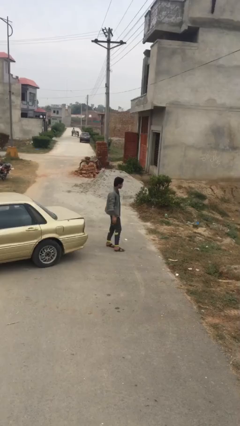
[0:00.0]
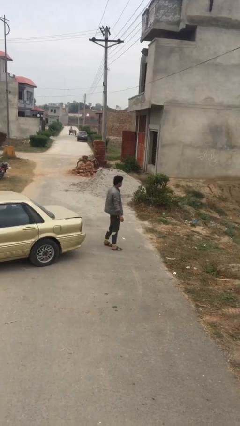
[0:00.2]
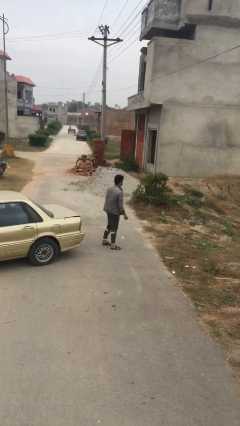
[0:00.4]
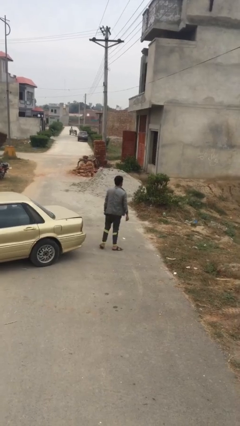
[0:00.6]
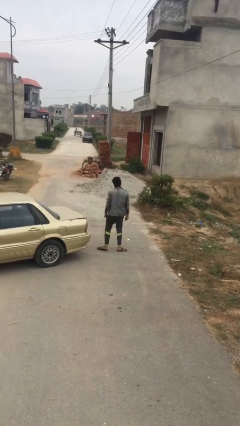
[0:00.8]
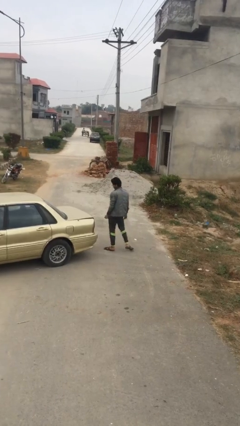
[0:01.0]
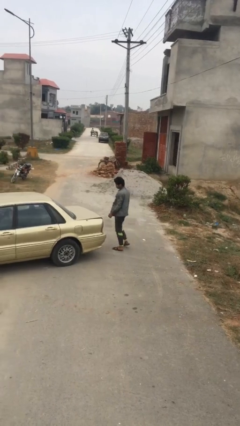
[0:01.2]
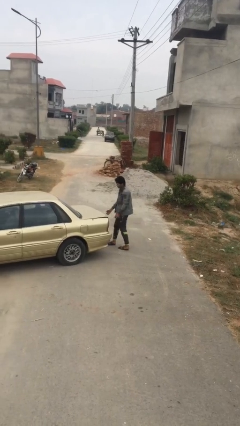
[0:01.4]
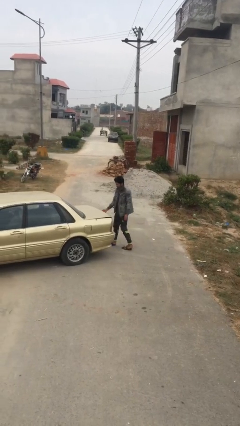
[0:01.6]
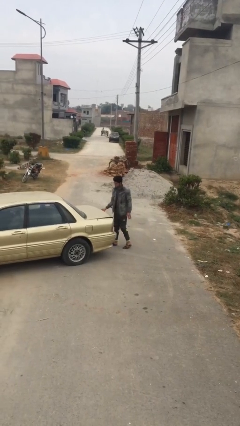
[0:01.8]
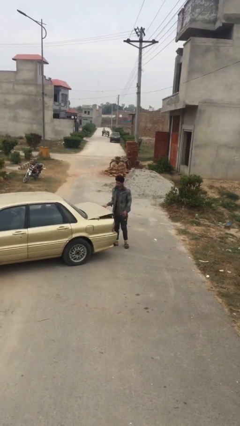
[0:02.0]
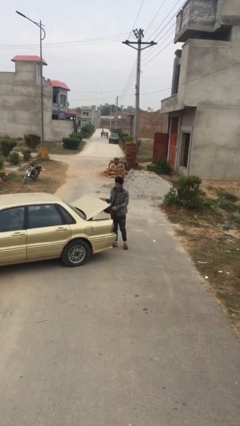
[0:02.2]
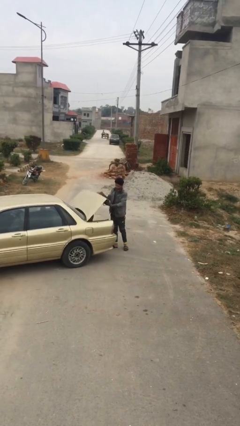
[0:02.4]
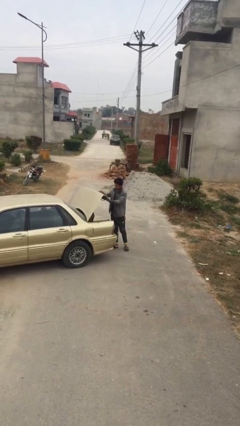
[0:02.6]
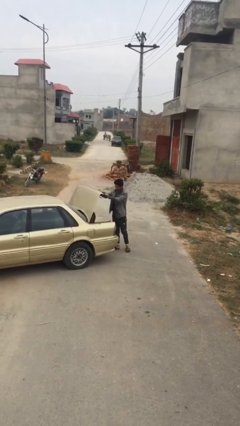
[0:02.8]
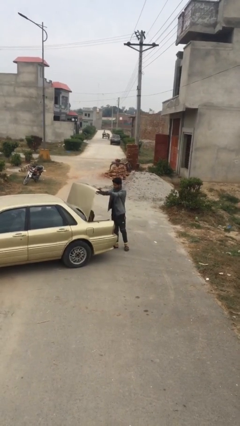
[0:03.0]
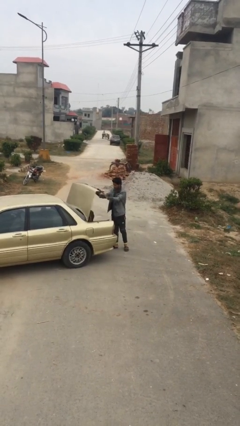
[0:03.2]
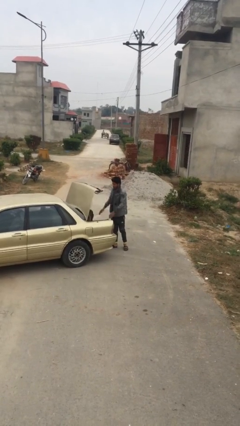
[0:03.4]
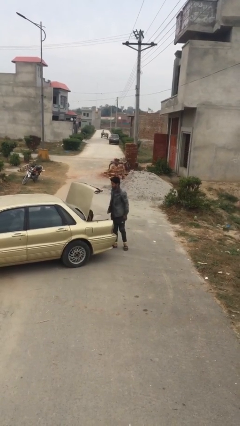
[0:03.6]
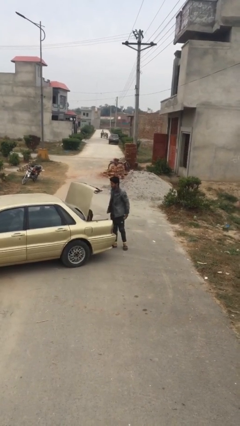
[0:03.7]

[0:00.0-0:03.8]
person opens car trunk

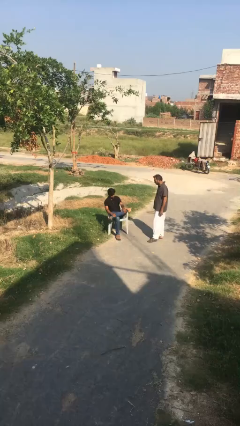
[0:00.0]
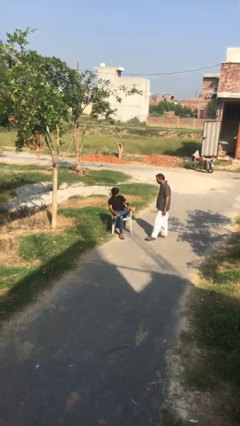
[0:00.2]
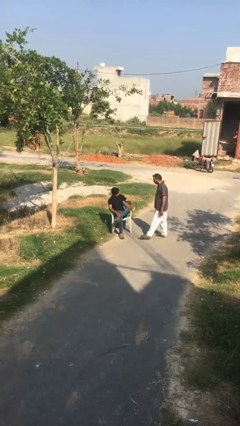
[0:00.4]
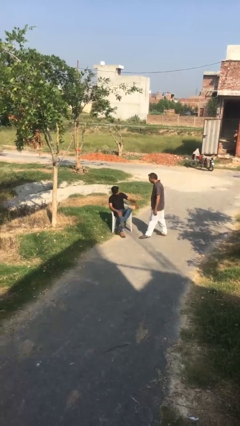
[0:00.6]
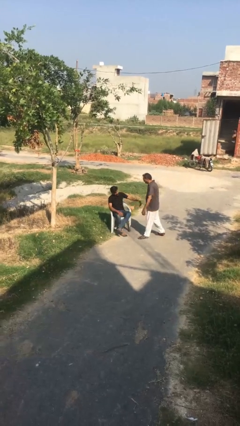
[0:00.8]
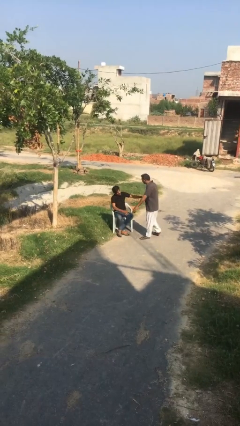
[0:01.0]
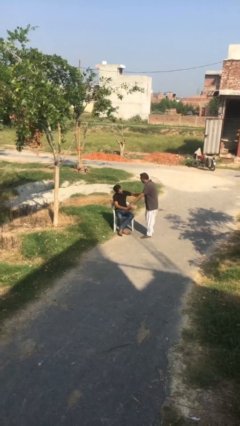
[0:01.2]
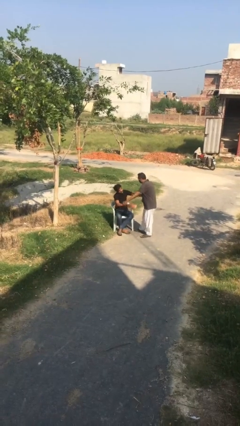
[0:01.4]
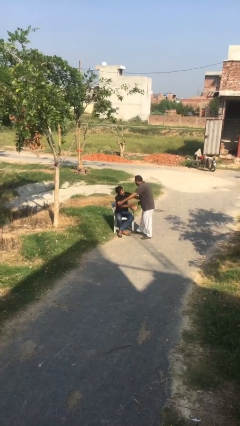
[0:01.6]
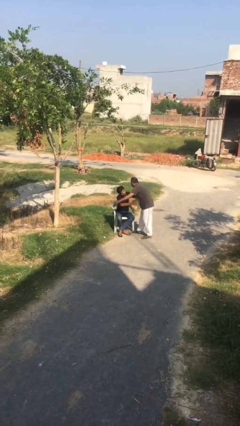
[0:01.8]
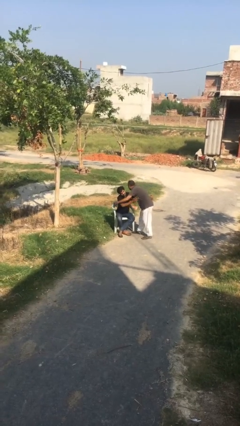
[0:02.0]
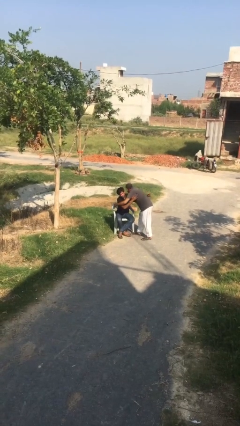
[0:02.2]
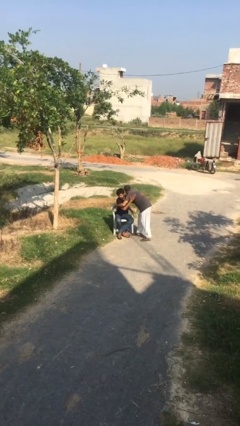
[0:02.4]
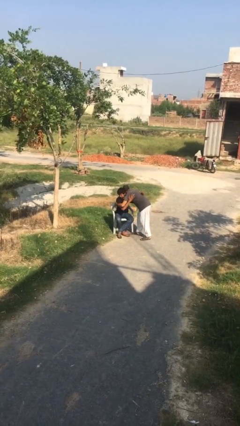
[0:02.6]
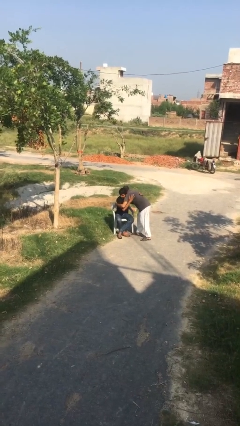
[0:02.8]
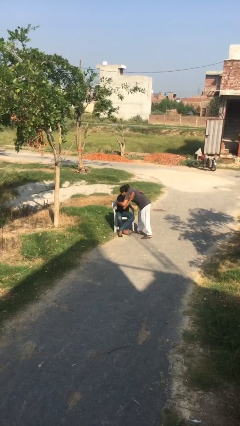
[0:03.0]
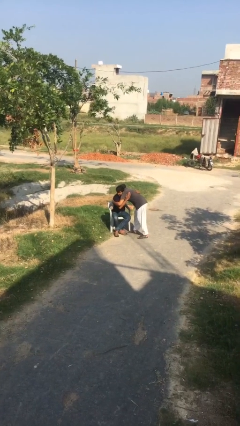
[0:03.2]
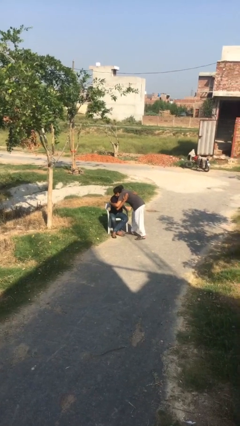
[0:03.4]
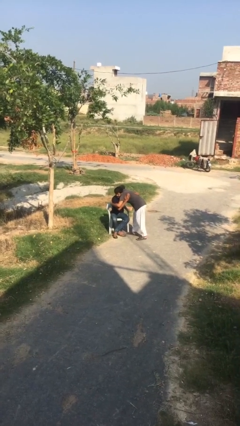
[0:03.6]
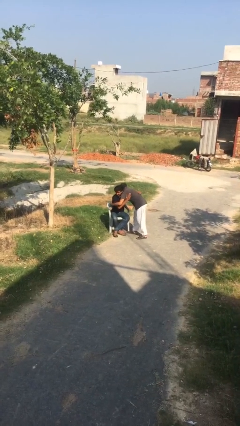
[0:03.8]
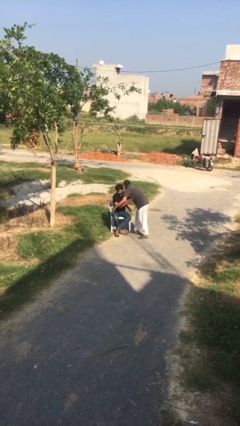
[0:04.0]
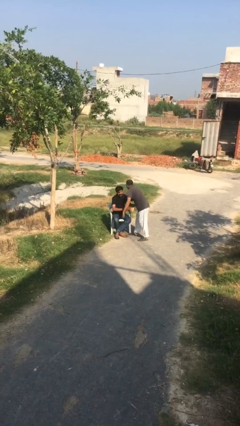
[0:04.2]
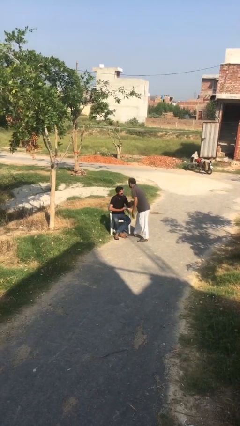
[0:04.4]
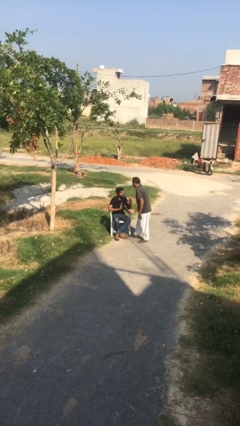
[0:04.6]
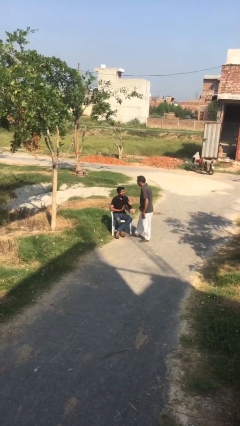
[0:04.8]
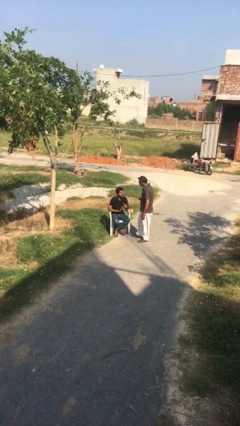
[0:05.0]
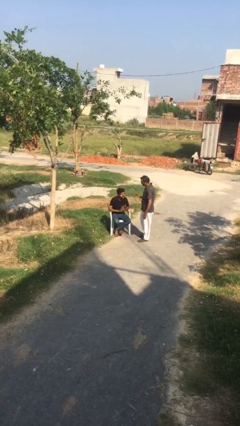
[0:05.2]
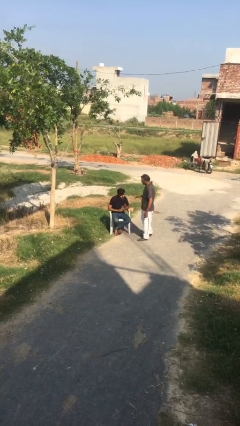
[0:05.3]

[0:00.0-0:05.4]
person embraces person

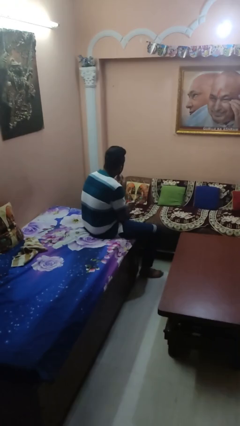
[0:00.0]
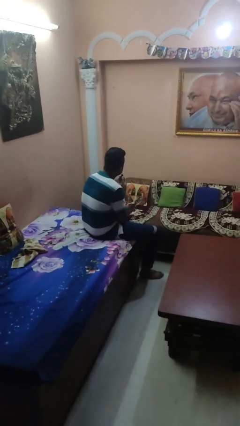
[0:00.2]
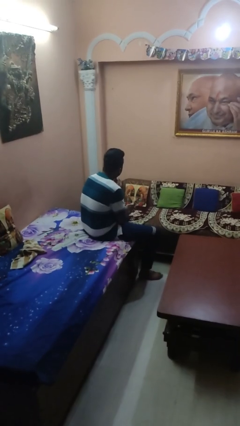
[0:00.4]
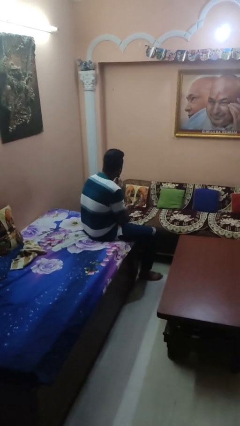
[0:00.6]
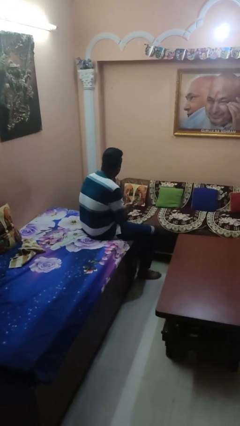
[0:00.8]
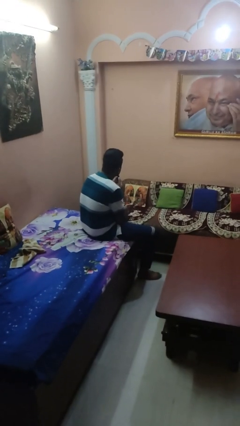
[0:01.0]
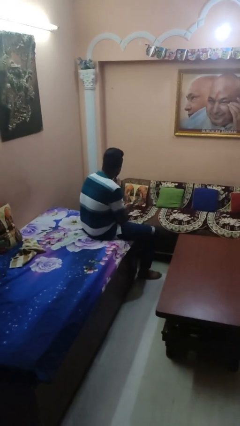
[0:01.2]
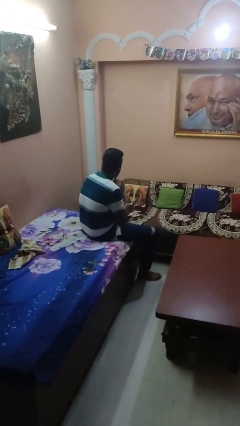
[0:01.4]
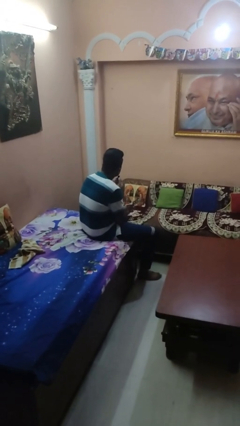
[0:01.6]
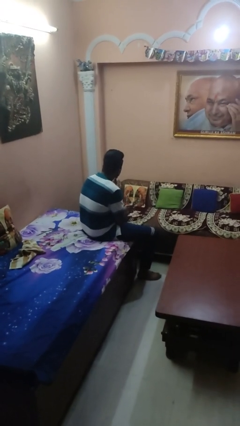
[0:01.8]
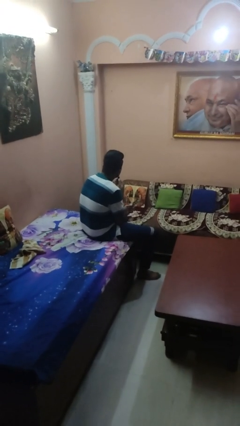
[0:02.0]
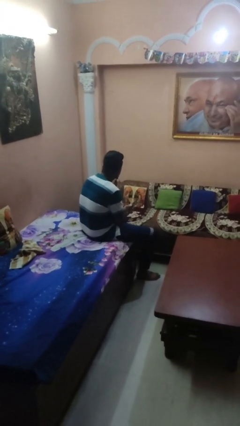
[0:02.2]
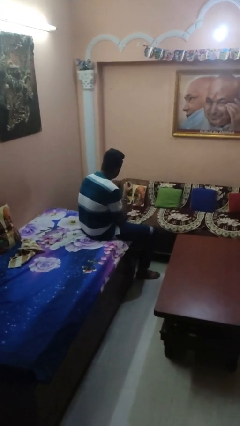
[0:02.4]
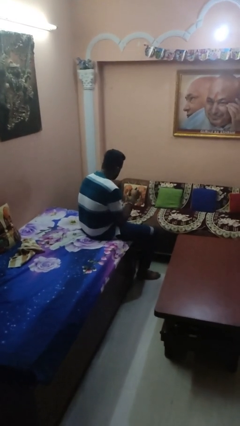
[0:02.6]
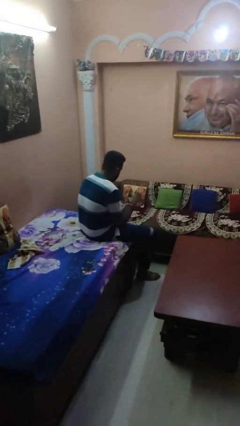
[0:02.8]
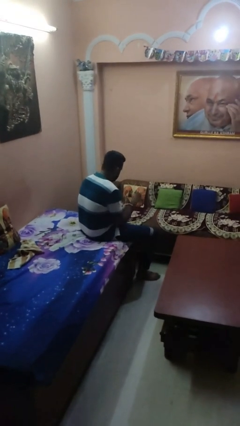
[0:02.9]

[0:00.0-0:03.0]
person applies lip makeup

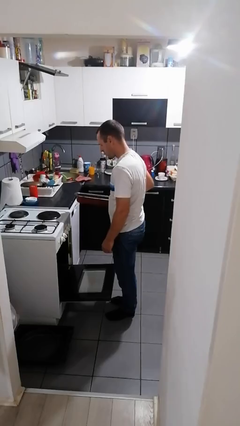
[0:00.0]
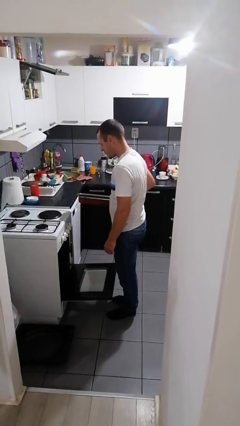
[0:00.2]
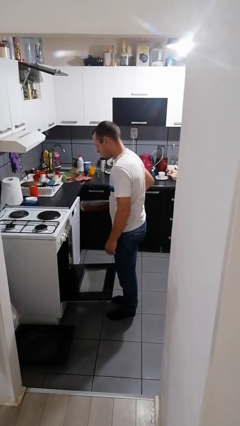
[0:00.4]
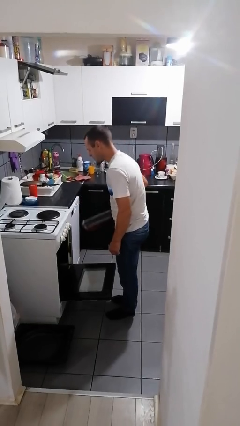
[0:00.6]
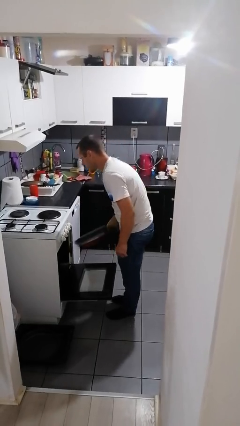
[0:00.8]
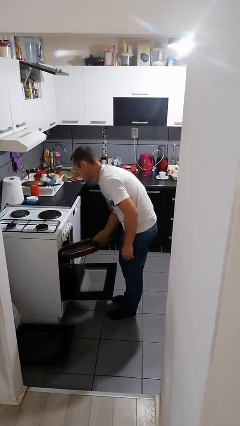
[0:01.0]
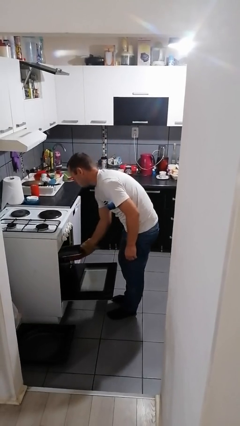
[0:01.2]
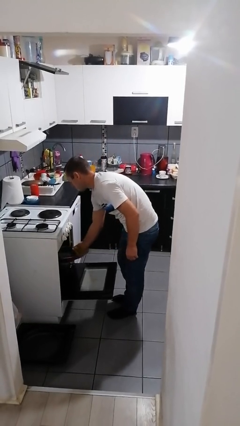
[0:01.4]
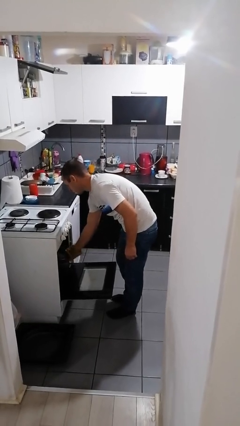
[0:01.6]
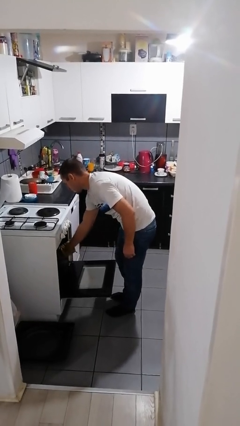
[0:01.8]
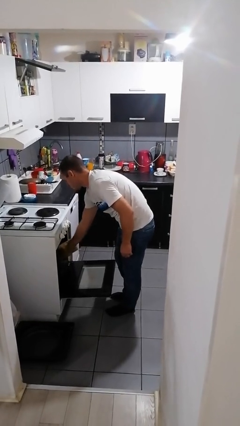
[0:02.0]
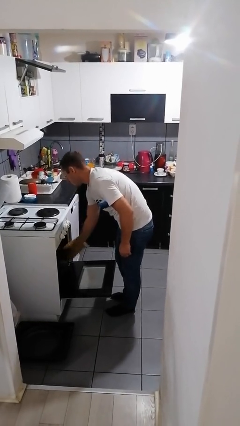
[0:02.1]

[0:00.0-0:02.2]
person puts object into oven

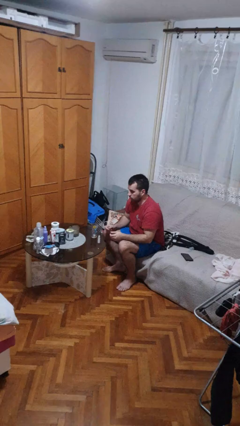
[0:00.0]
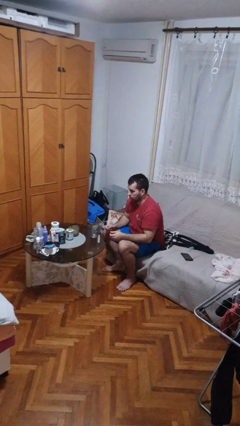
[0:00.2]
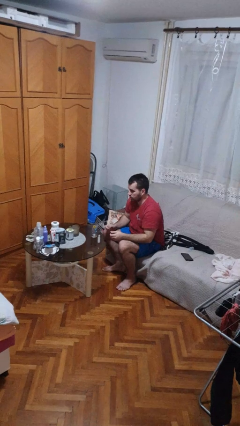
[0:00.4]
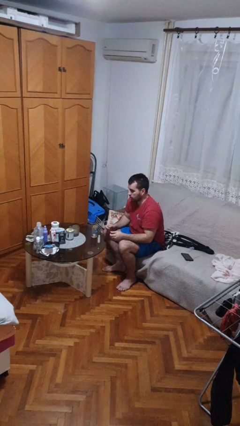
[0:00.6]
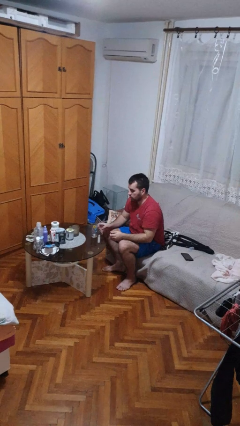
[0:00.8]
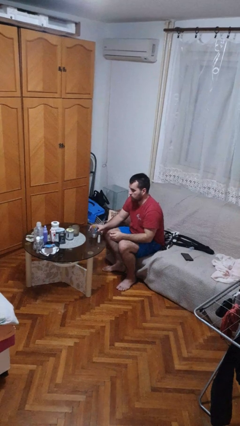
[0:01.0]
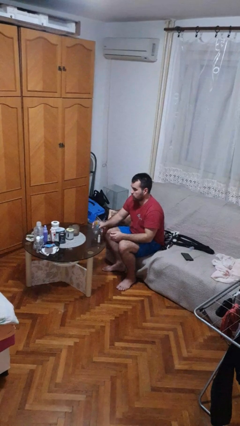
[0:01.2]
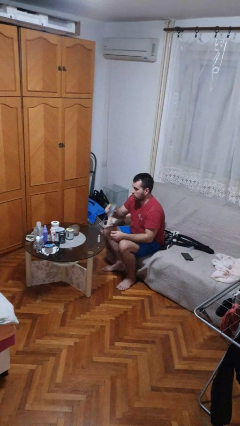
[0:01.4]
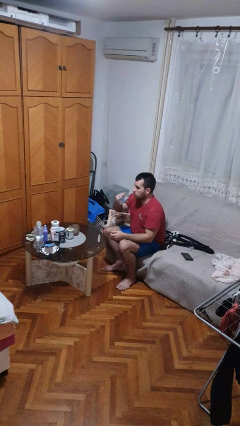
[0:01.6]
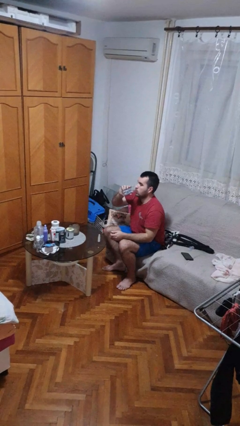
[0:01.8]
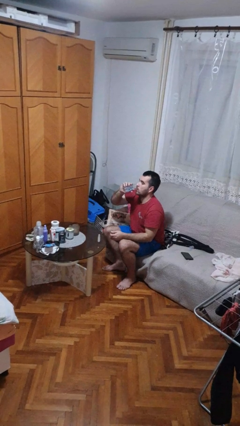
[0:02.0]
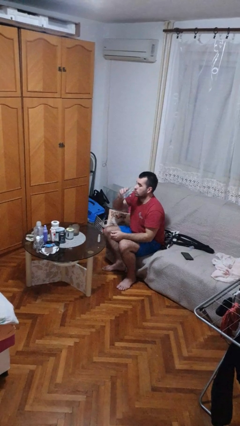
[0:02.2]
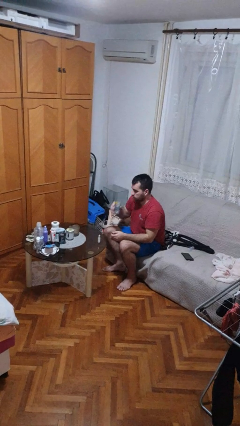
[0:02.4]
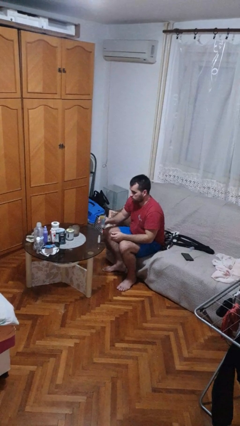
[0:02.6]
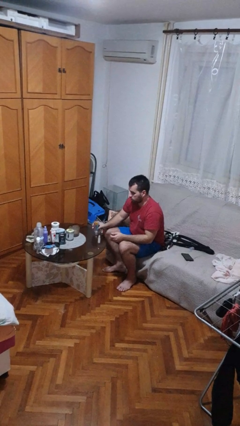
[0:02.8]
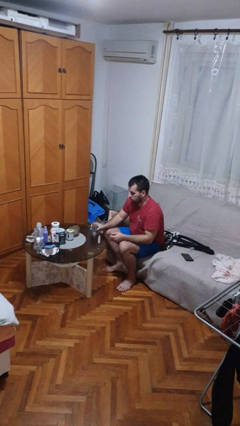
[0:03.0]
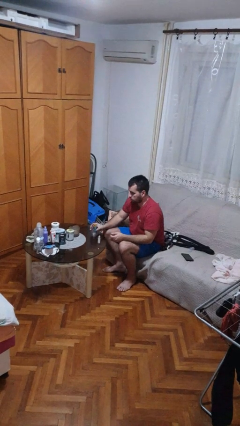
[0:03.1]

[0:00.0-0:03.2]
person drinks from cup

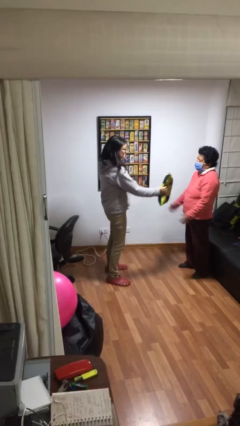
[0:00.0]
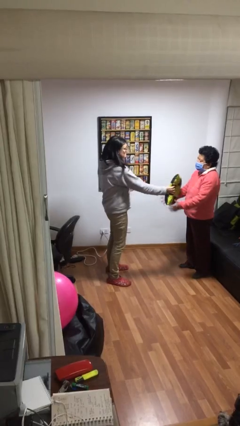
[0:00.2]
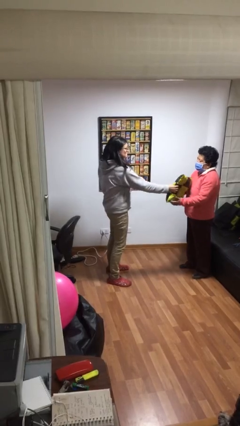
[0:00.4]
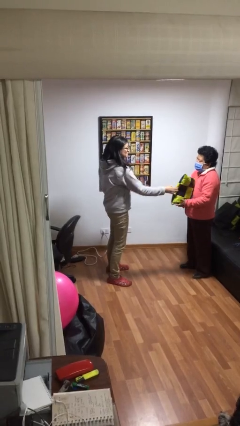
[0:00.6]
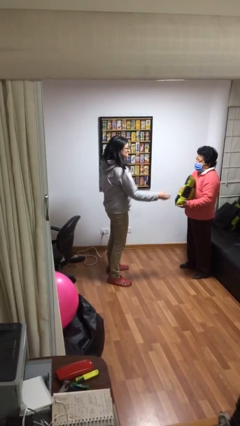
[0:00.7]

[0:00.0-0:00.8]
person transfers object to person
